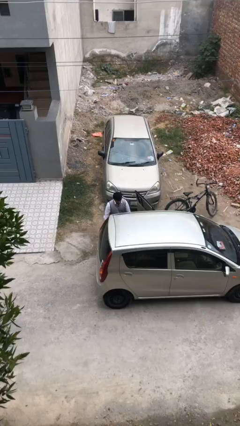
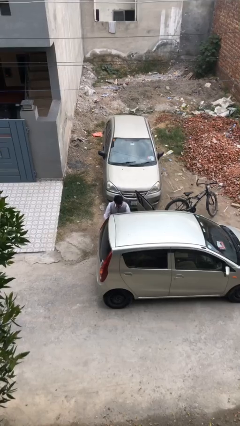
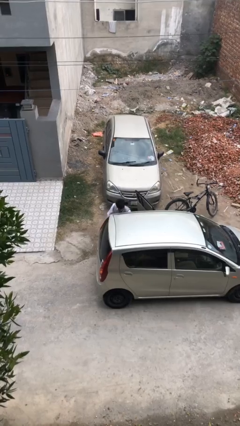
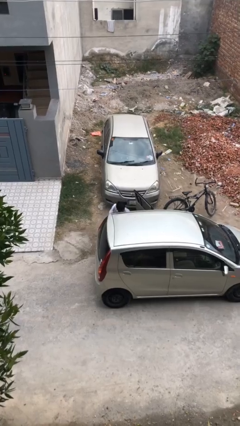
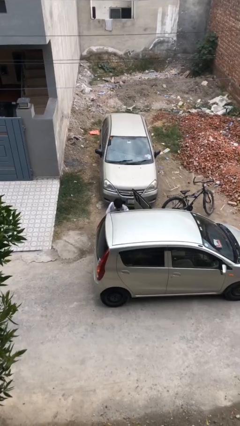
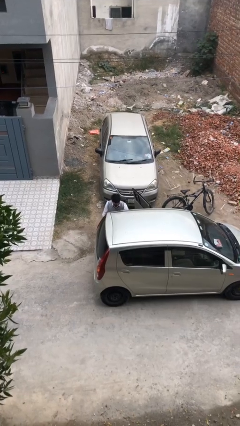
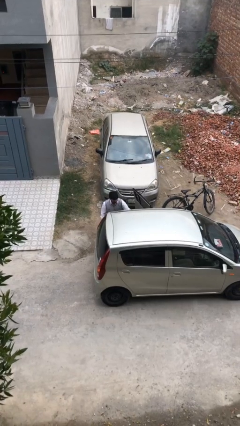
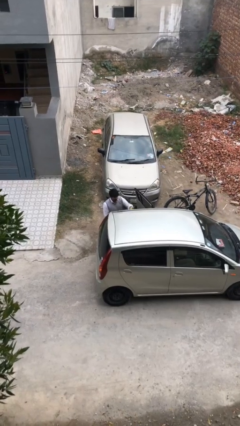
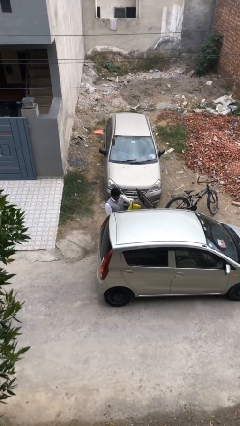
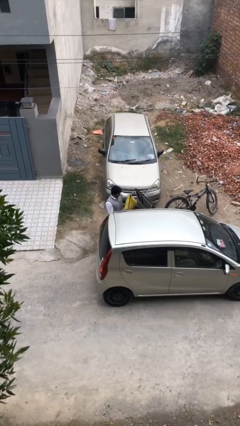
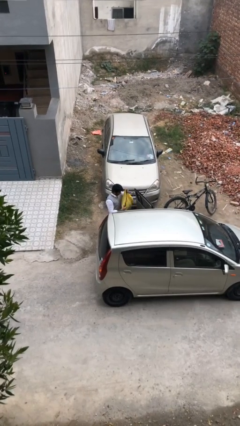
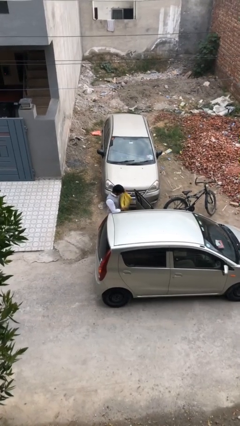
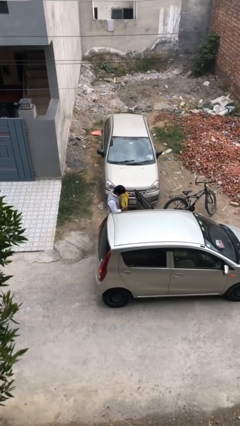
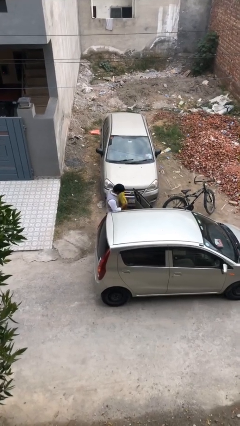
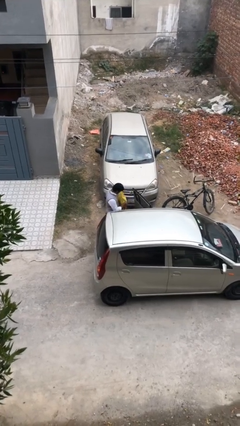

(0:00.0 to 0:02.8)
person unloads car

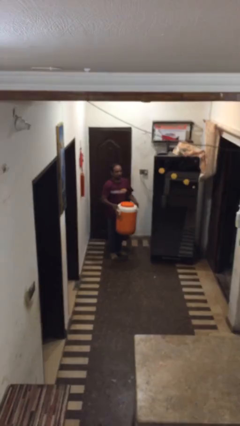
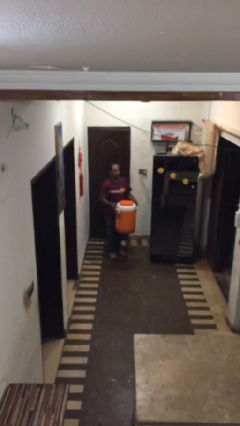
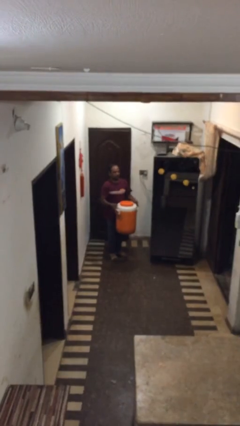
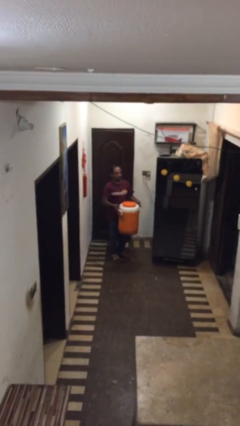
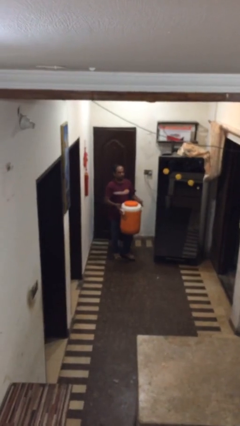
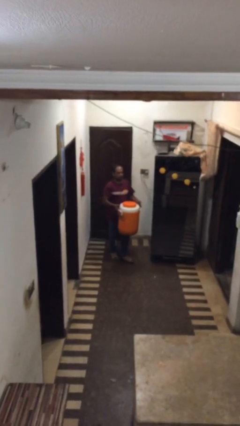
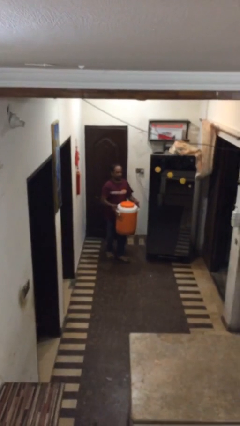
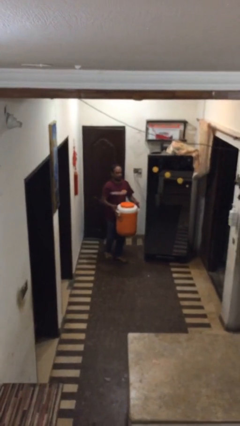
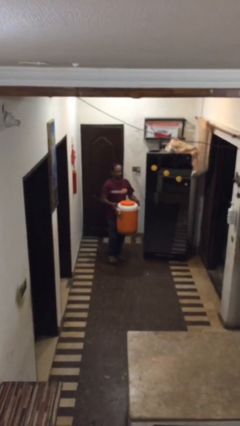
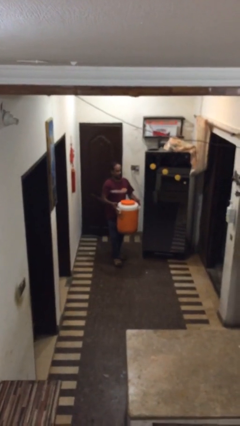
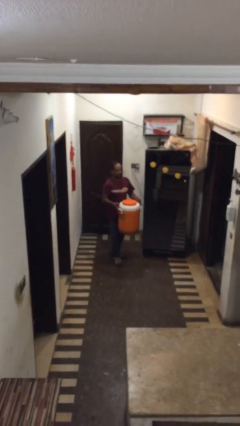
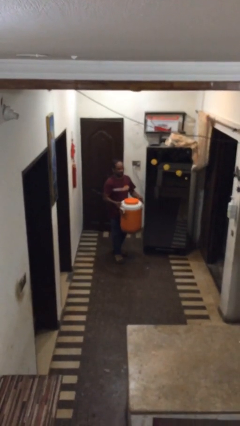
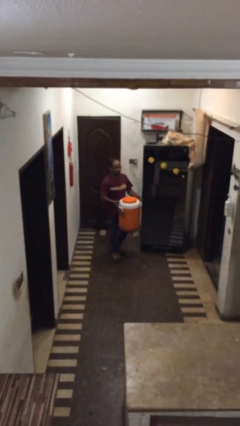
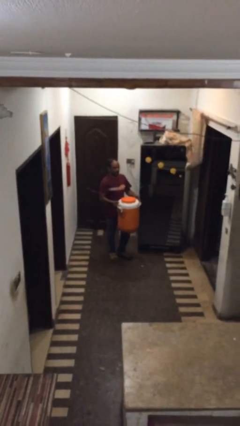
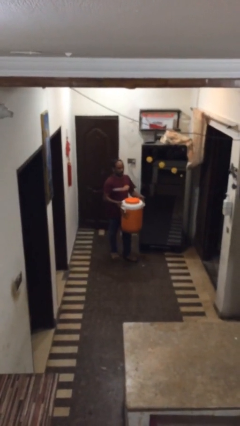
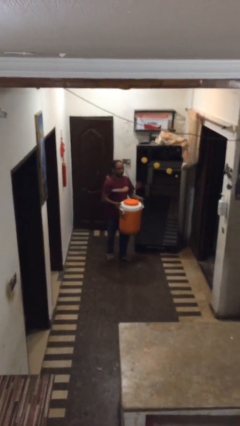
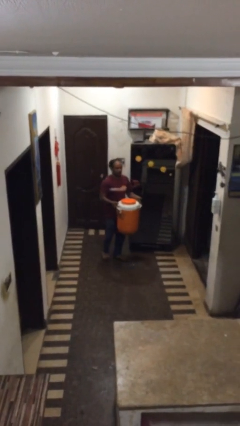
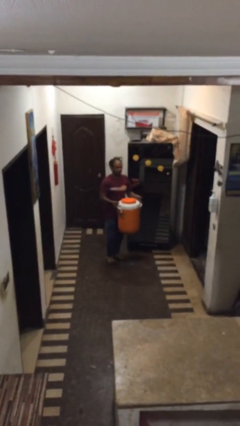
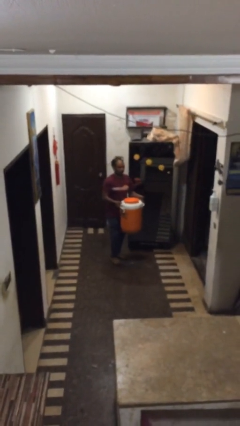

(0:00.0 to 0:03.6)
person carries heavy object

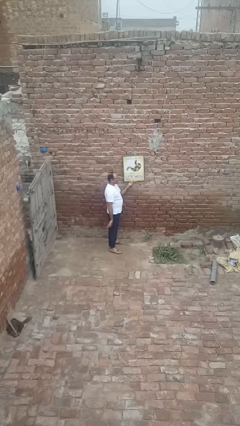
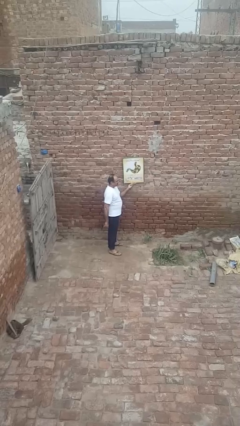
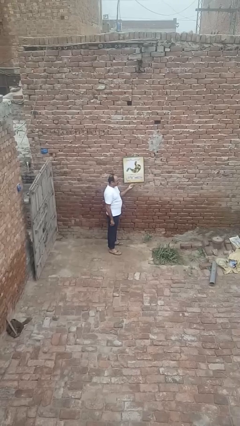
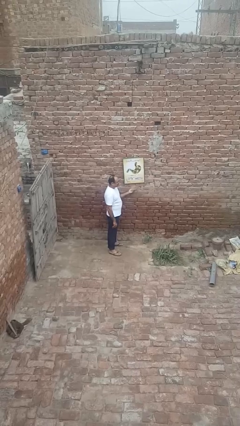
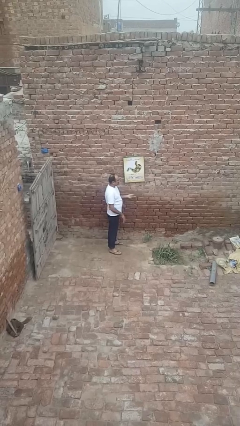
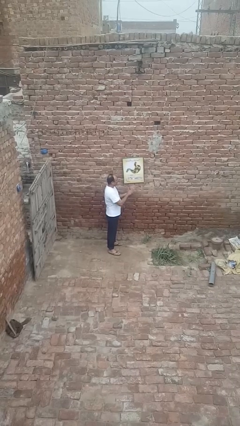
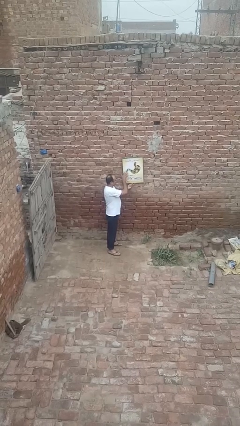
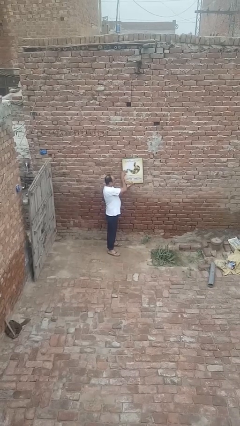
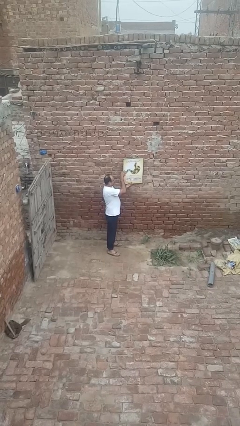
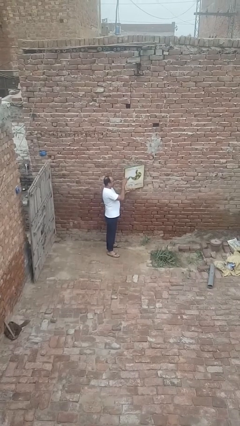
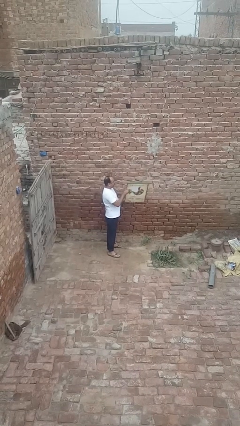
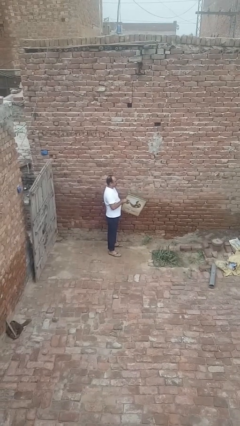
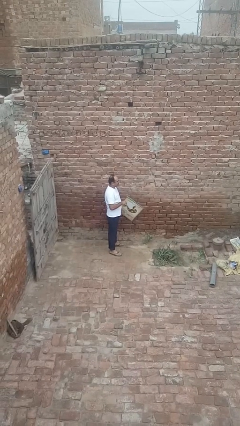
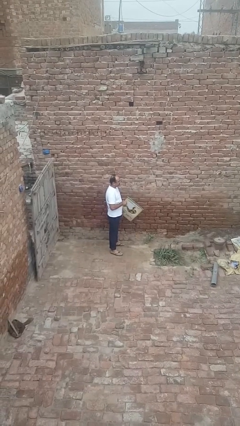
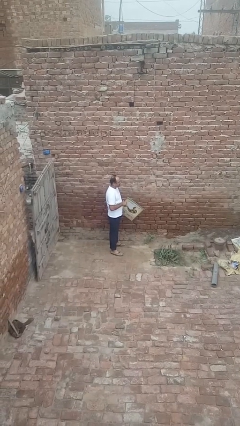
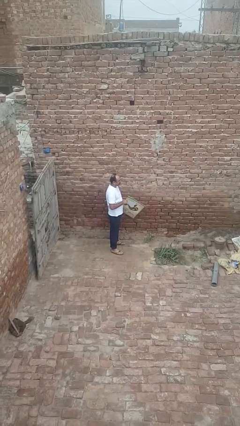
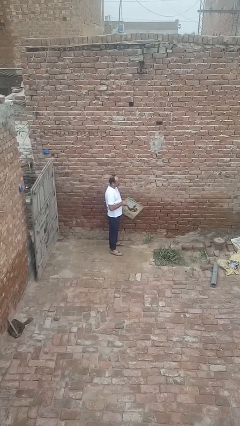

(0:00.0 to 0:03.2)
person takes down picture frame

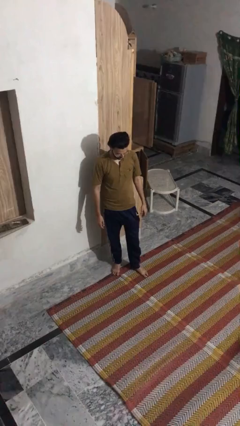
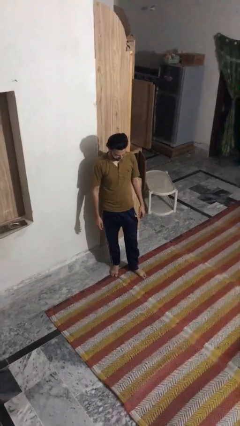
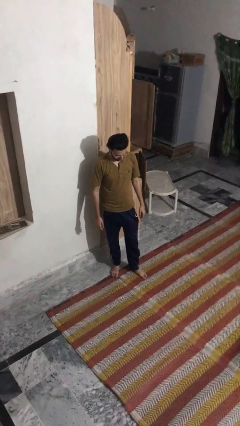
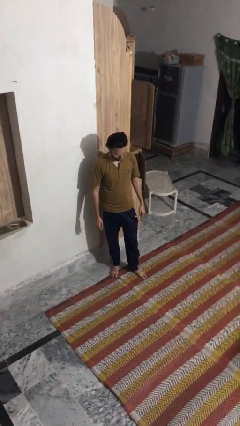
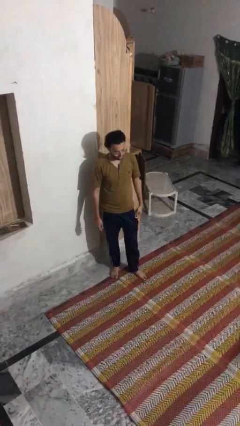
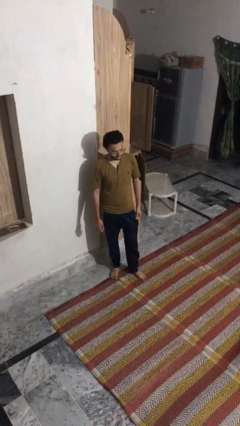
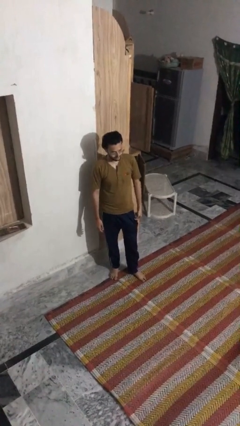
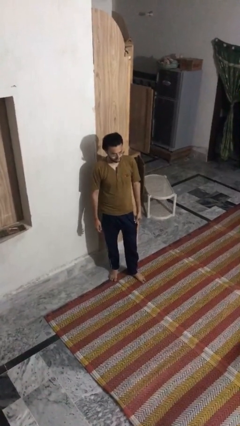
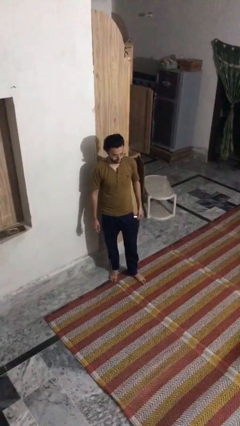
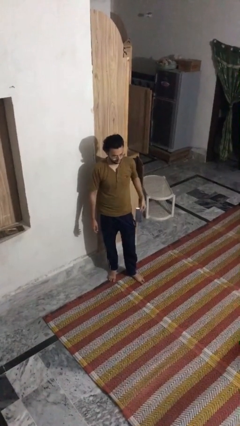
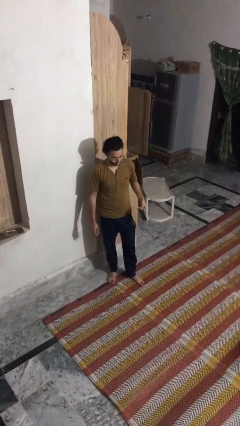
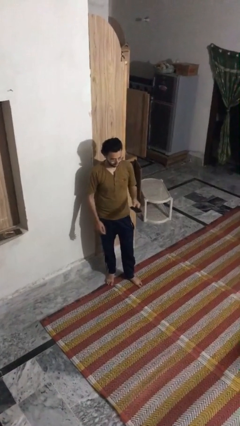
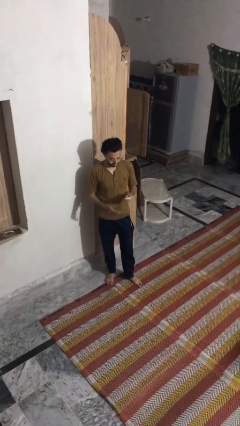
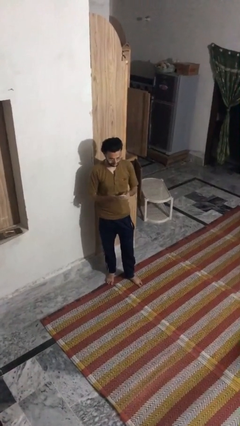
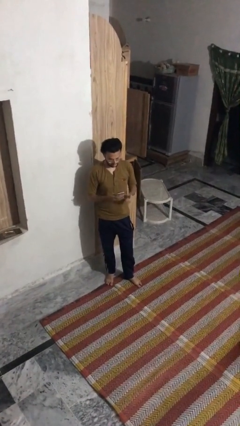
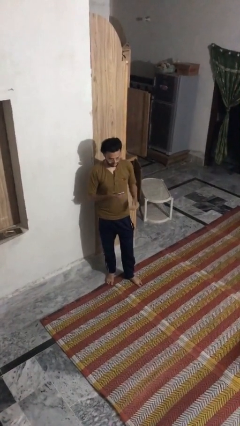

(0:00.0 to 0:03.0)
person takes phone from pocket

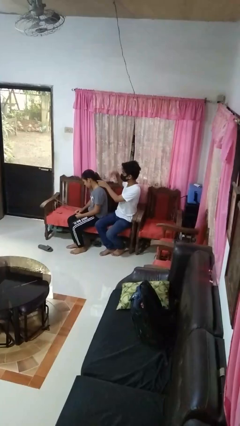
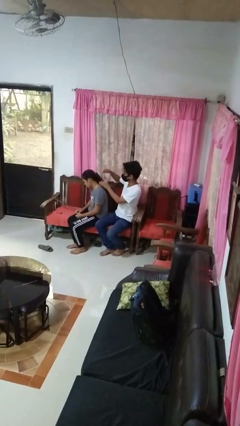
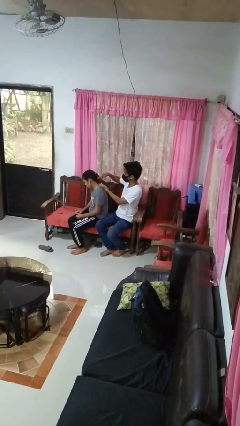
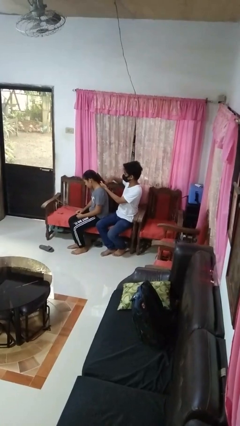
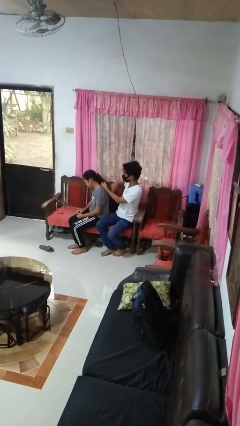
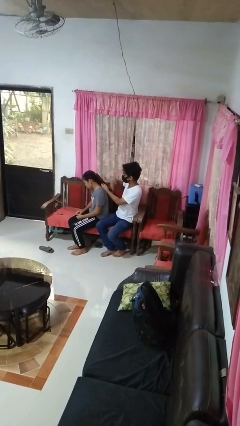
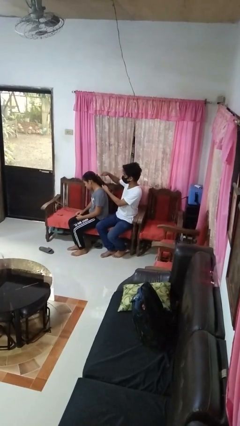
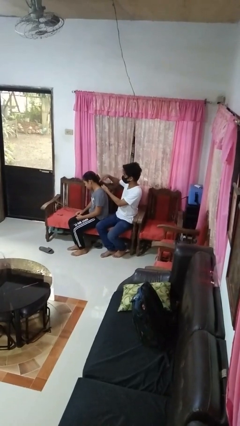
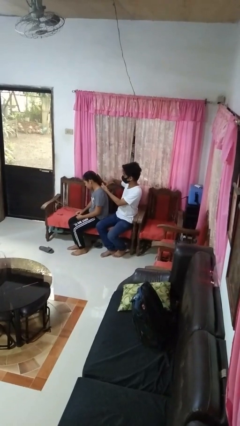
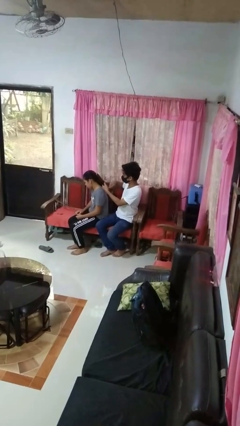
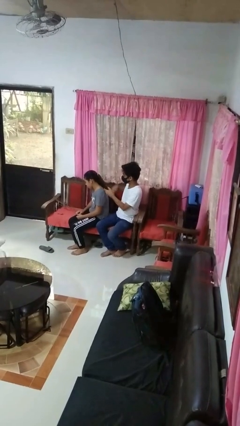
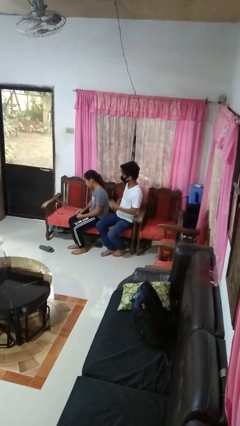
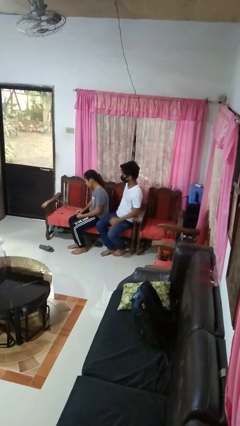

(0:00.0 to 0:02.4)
person brushes hair of person

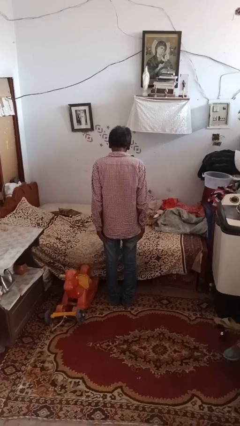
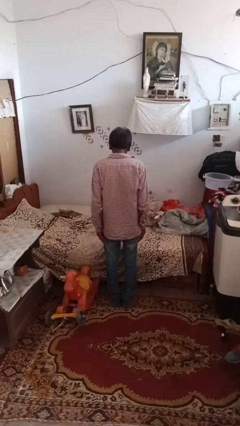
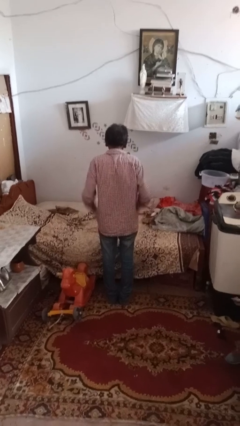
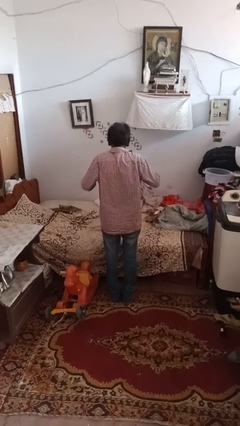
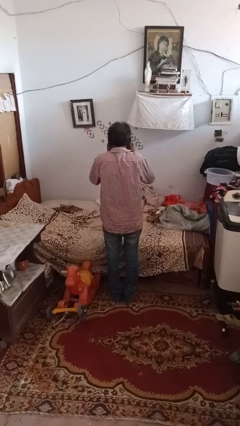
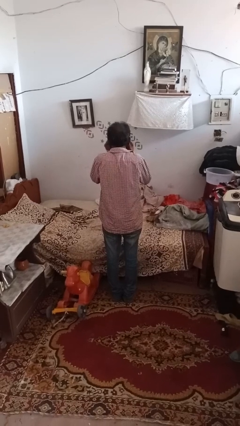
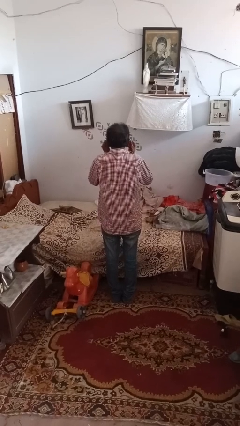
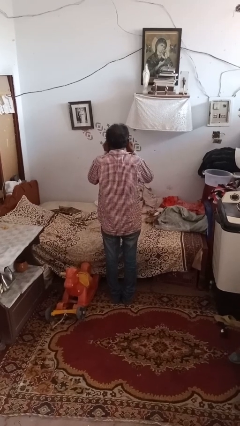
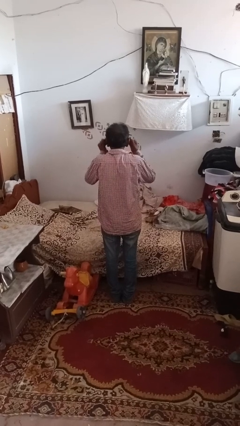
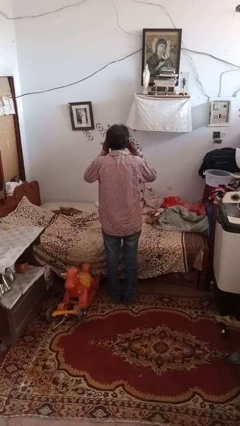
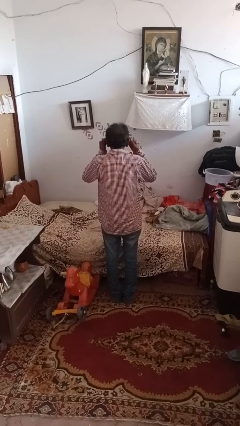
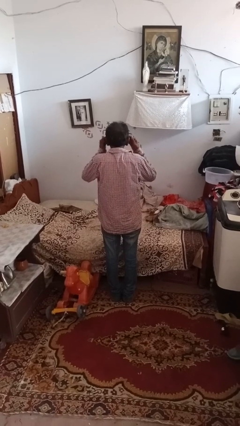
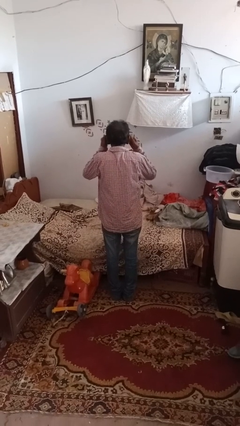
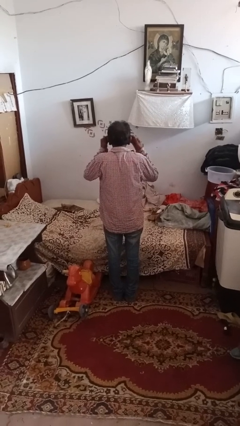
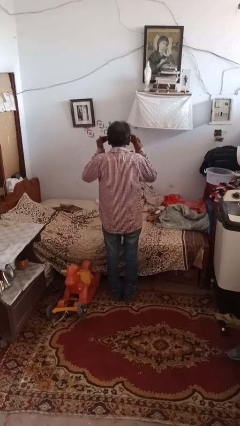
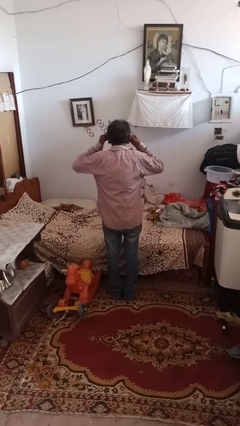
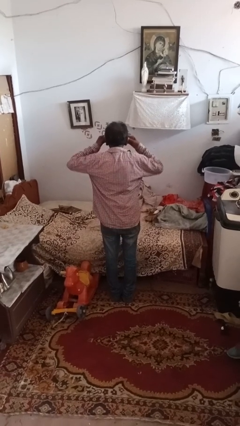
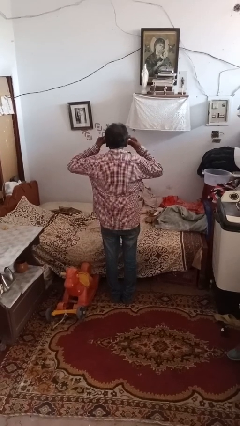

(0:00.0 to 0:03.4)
person rubs eyes
